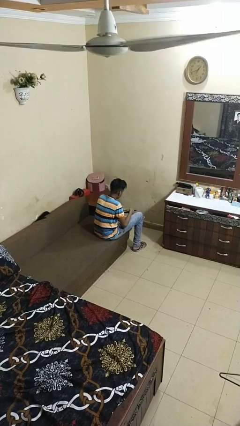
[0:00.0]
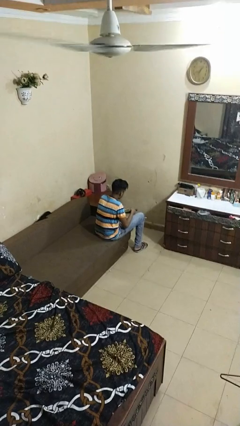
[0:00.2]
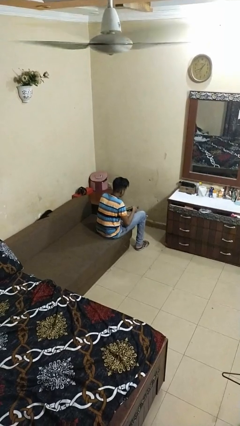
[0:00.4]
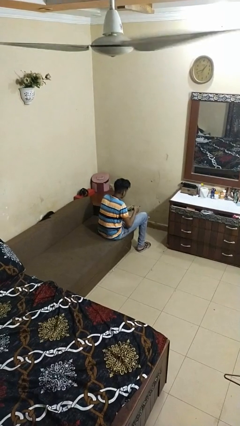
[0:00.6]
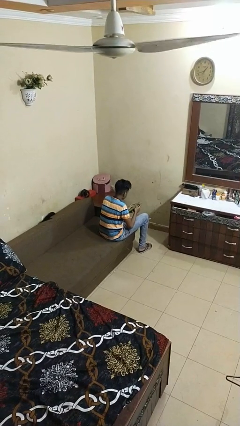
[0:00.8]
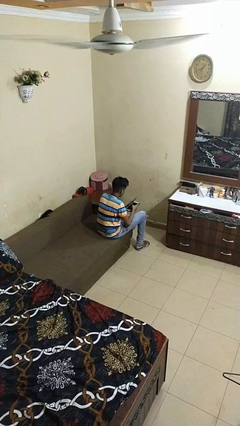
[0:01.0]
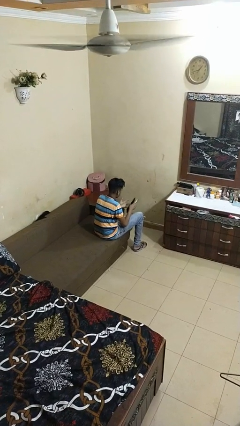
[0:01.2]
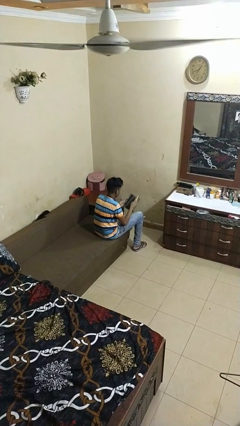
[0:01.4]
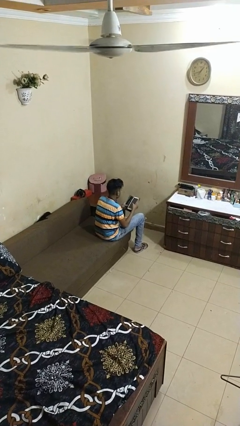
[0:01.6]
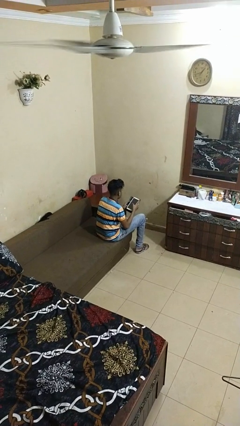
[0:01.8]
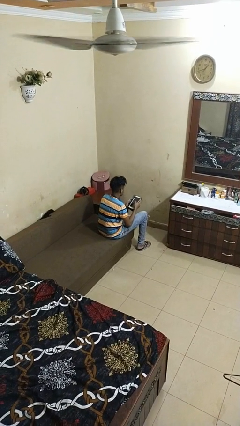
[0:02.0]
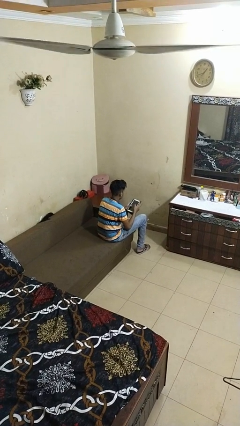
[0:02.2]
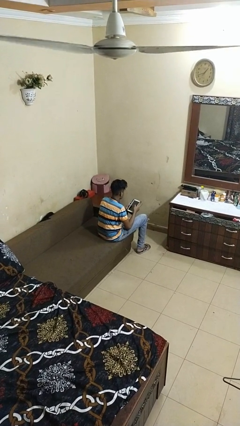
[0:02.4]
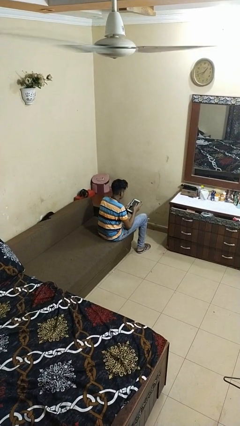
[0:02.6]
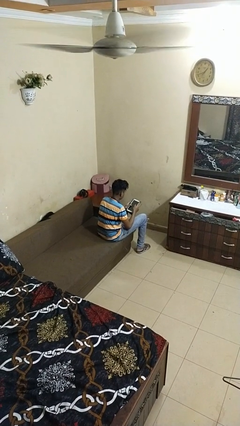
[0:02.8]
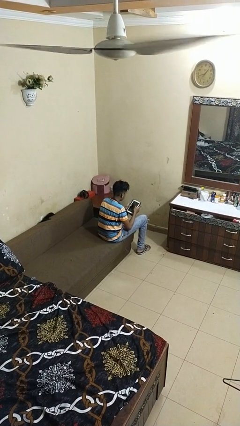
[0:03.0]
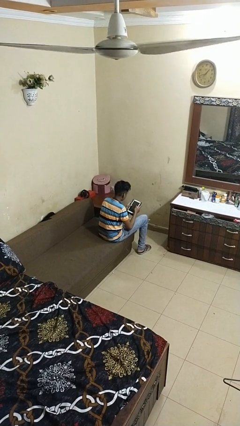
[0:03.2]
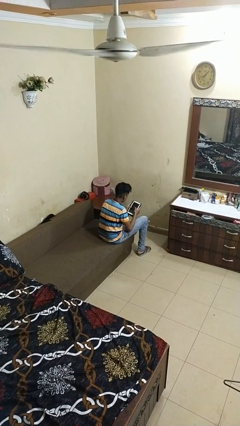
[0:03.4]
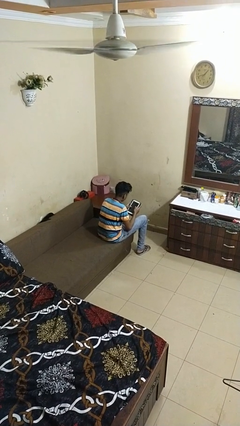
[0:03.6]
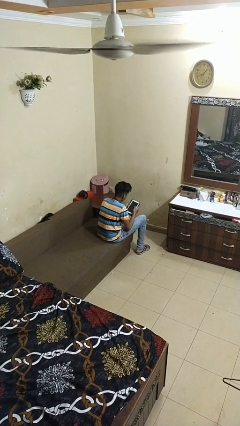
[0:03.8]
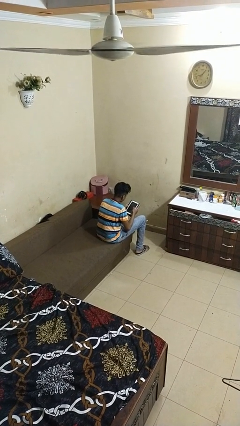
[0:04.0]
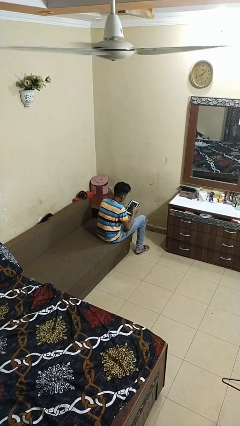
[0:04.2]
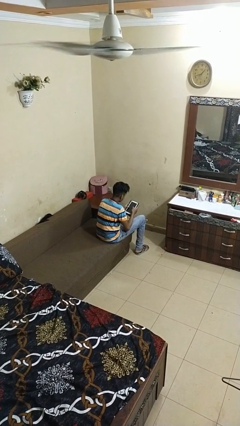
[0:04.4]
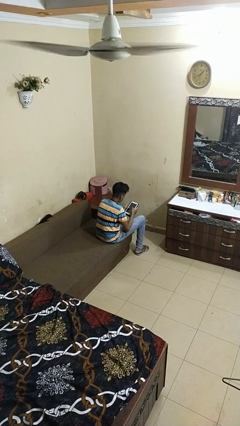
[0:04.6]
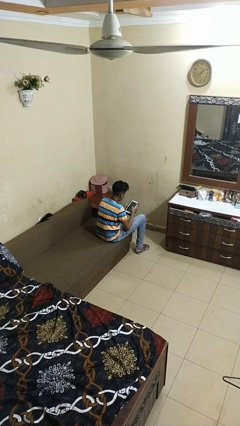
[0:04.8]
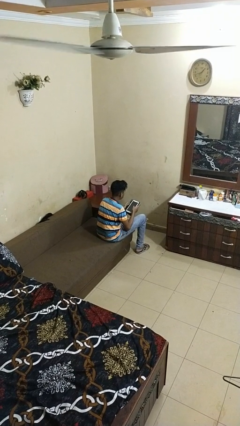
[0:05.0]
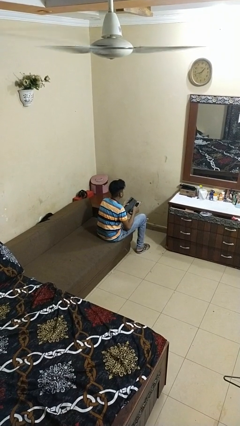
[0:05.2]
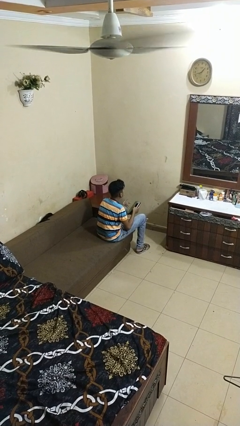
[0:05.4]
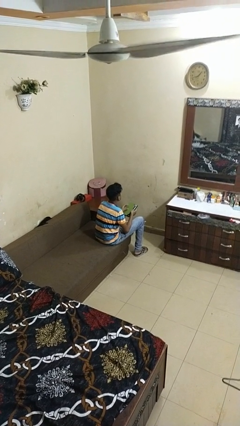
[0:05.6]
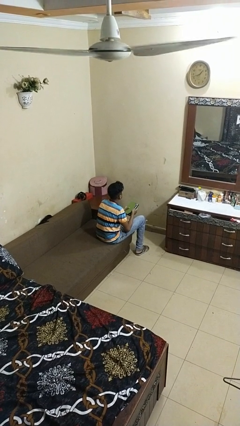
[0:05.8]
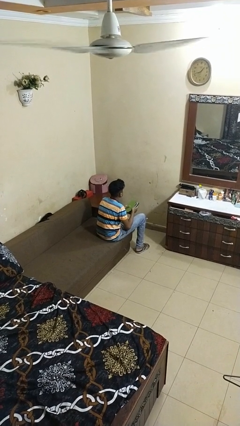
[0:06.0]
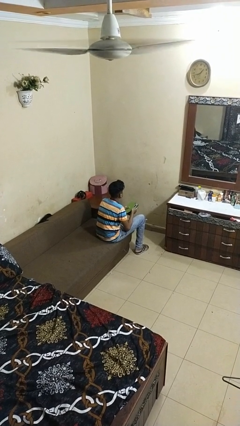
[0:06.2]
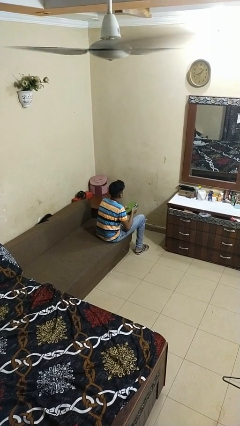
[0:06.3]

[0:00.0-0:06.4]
person interacts with tablet

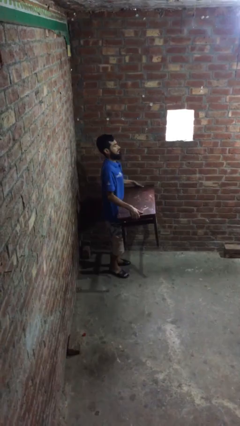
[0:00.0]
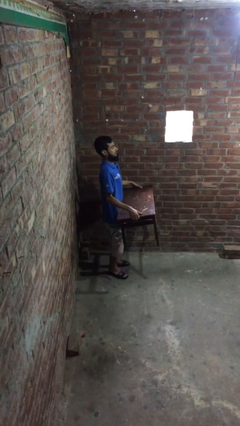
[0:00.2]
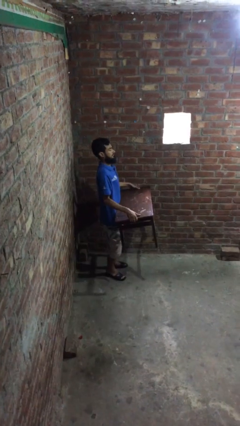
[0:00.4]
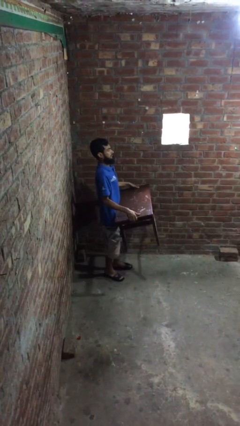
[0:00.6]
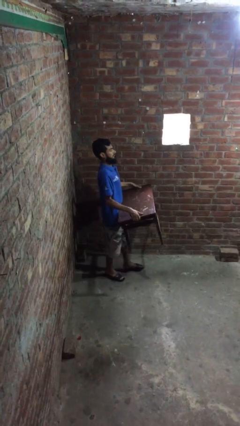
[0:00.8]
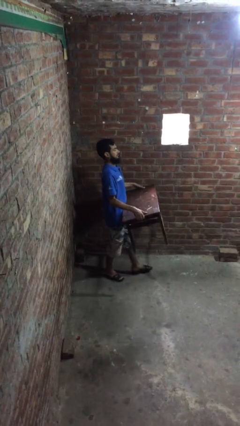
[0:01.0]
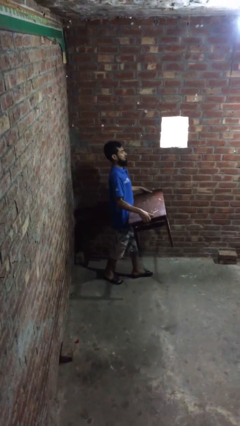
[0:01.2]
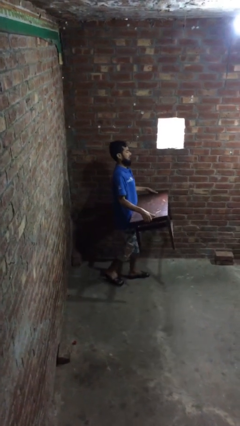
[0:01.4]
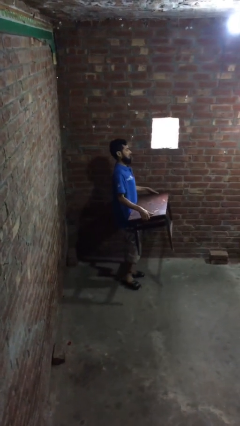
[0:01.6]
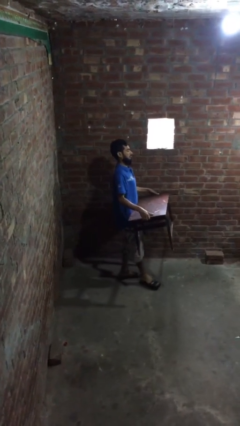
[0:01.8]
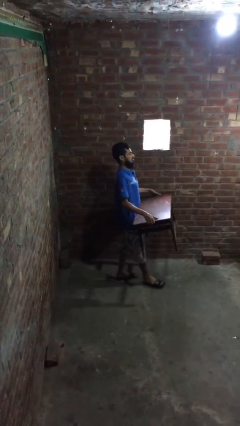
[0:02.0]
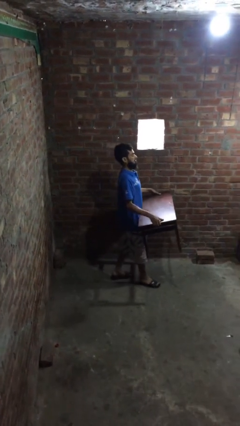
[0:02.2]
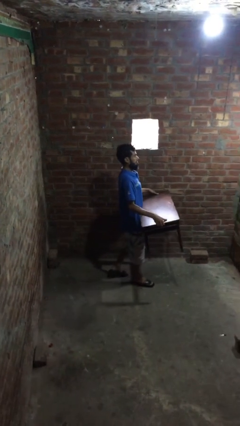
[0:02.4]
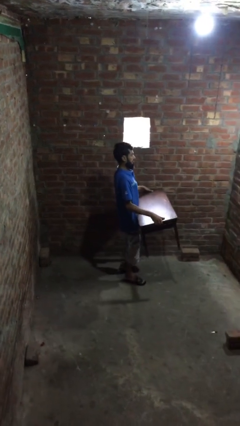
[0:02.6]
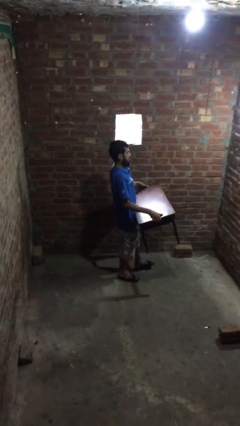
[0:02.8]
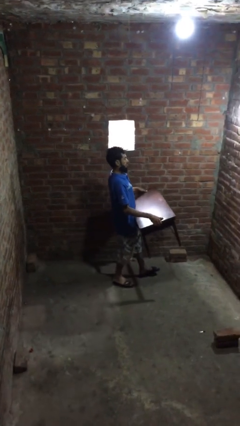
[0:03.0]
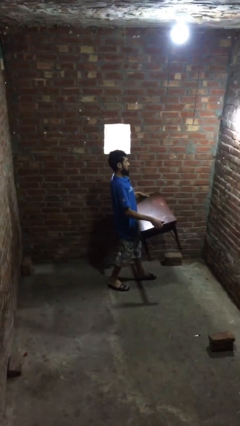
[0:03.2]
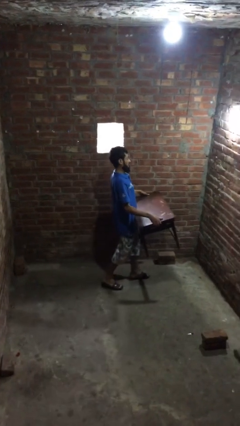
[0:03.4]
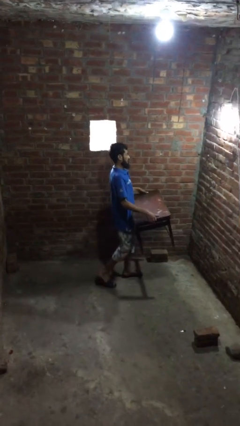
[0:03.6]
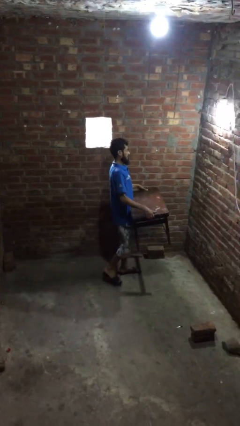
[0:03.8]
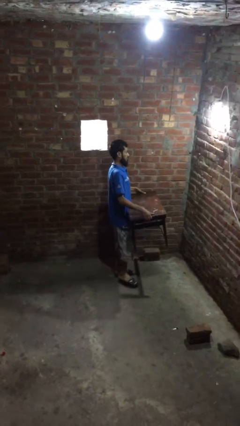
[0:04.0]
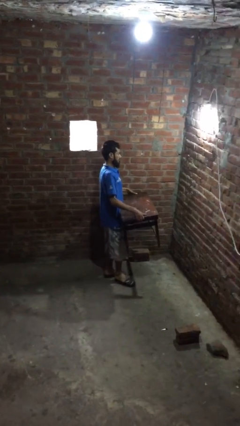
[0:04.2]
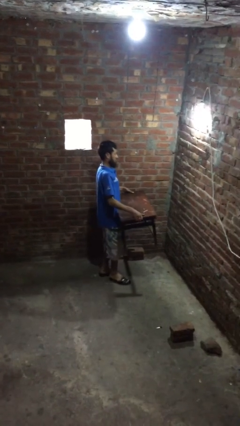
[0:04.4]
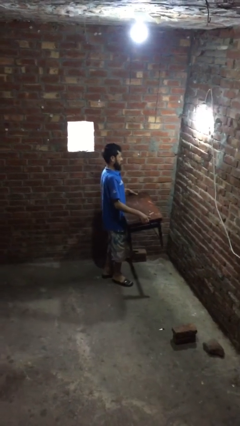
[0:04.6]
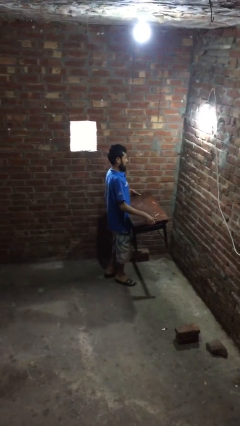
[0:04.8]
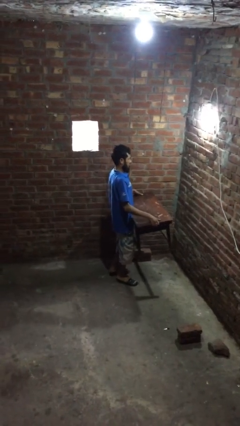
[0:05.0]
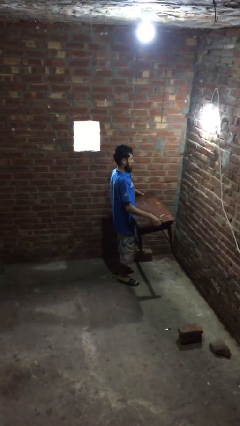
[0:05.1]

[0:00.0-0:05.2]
person carries heavy object

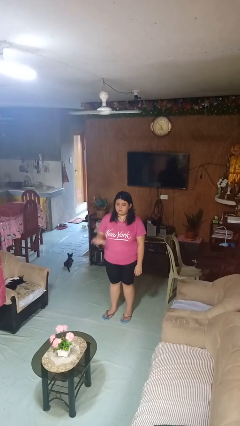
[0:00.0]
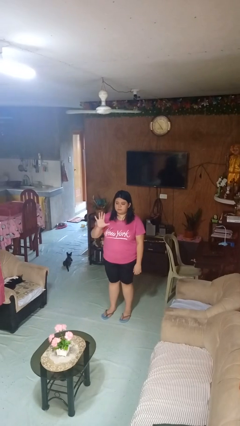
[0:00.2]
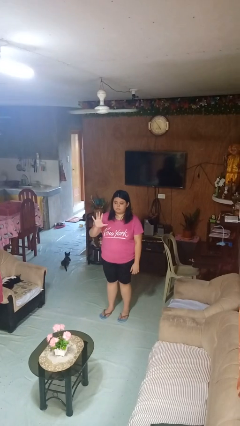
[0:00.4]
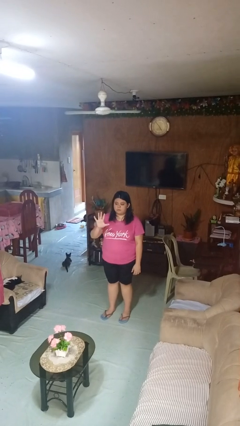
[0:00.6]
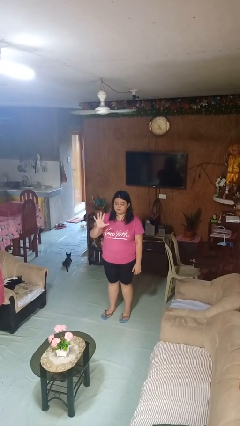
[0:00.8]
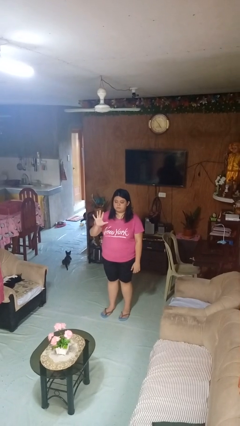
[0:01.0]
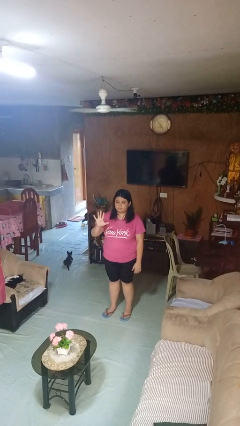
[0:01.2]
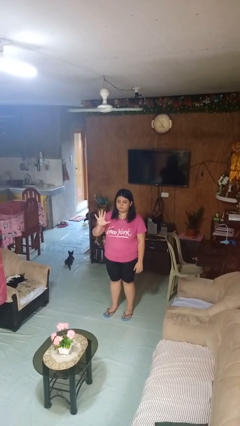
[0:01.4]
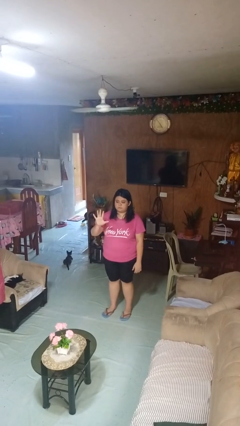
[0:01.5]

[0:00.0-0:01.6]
person gestures number five

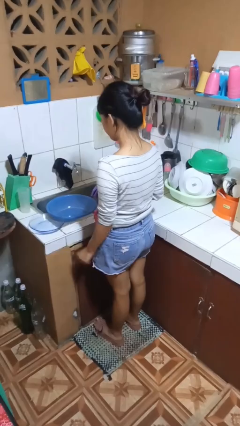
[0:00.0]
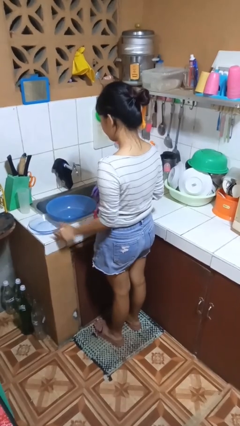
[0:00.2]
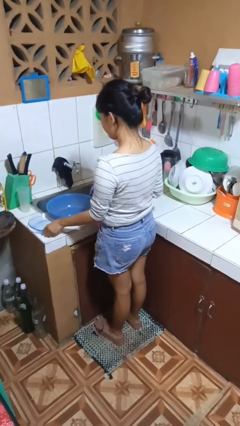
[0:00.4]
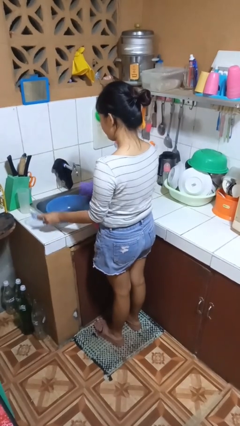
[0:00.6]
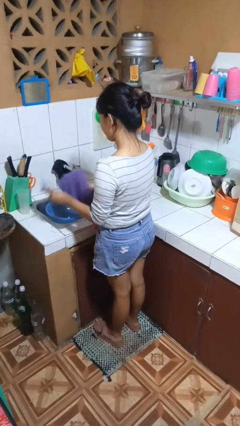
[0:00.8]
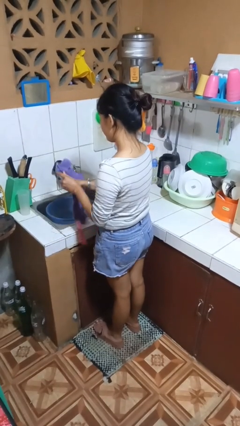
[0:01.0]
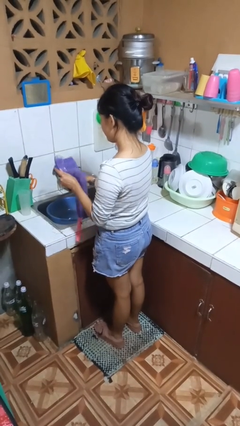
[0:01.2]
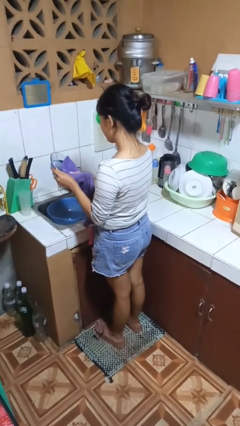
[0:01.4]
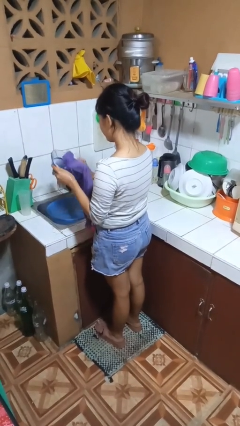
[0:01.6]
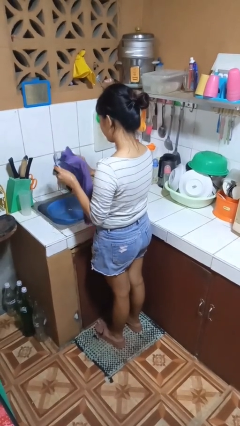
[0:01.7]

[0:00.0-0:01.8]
person dries dish

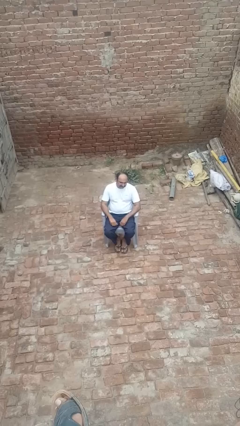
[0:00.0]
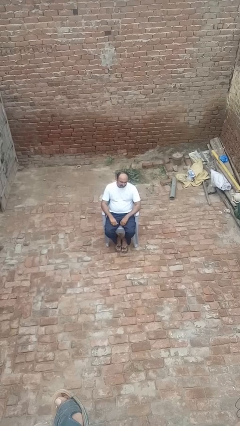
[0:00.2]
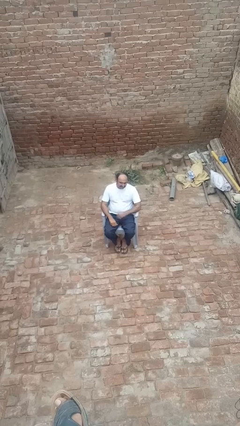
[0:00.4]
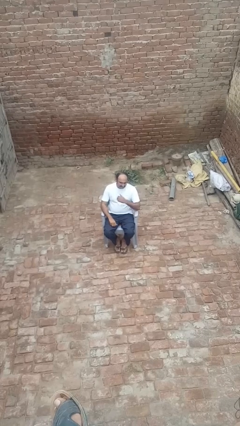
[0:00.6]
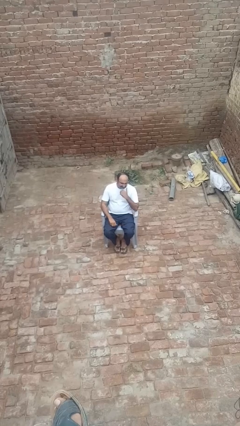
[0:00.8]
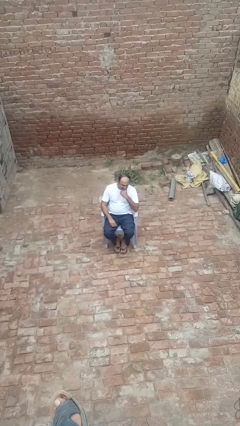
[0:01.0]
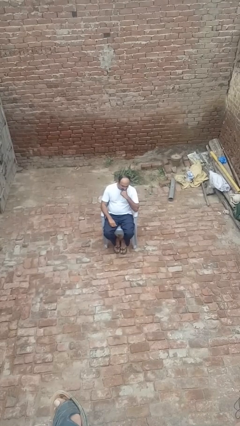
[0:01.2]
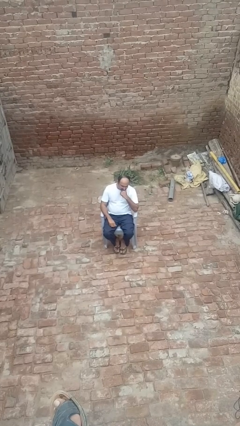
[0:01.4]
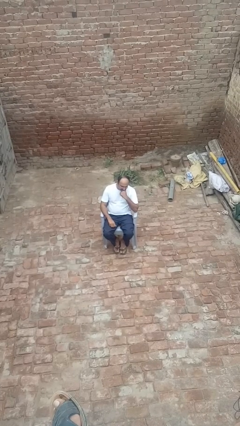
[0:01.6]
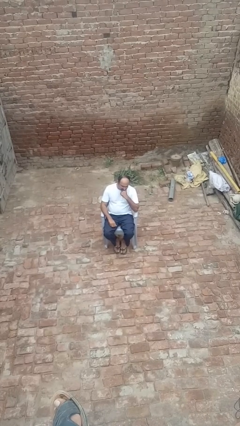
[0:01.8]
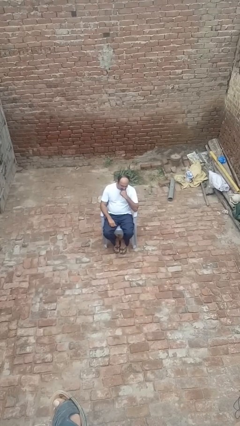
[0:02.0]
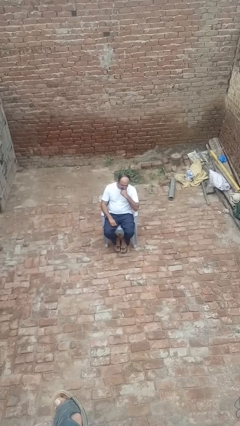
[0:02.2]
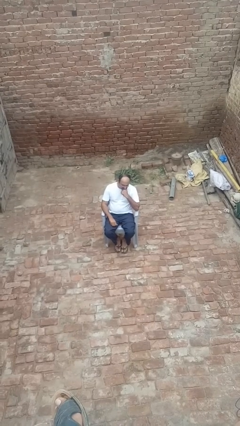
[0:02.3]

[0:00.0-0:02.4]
person strokes chin

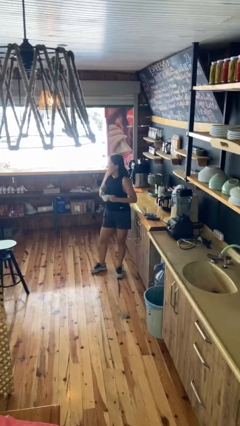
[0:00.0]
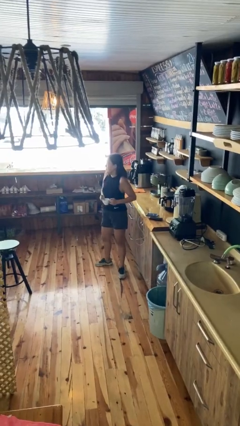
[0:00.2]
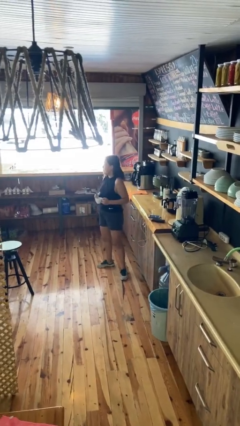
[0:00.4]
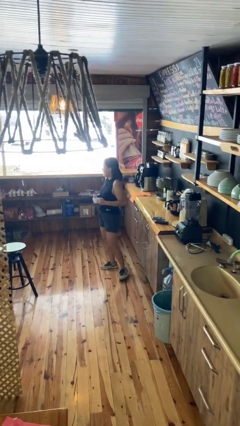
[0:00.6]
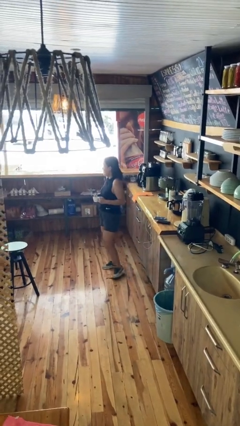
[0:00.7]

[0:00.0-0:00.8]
person drinks from mug
